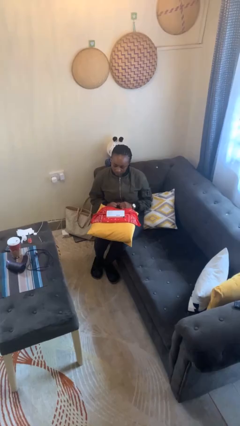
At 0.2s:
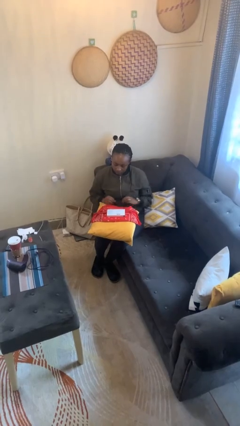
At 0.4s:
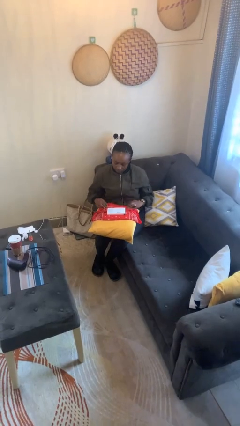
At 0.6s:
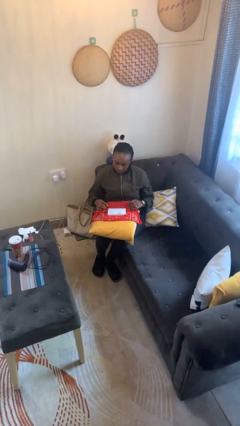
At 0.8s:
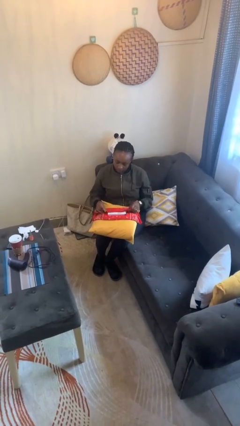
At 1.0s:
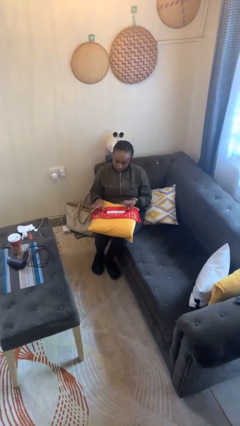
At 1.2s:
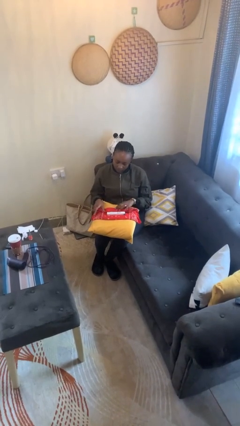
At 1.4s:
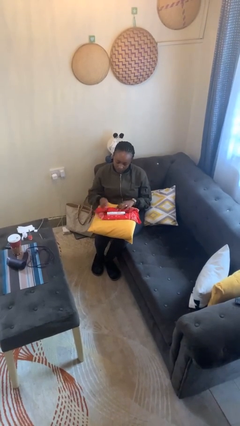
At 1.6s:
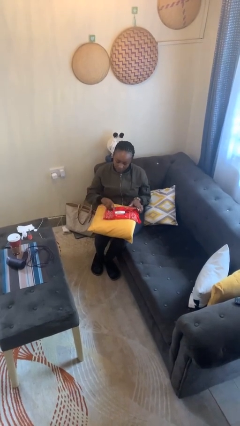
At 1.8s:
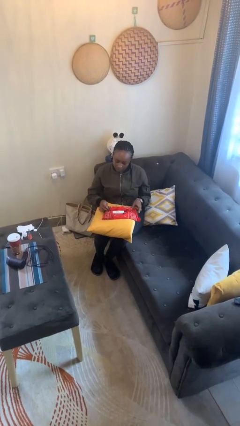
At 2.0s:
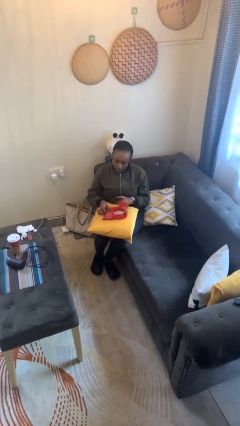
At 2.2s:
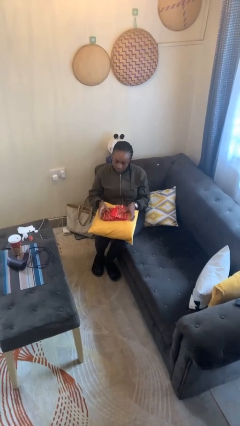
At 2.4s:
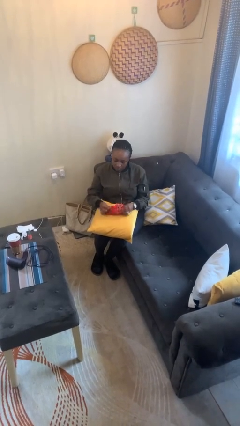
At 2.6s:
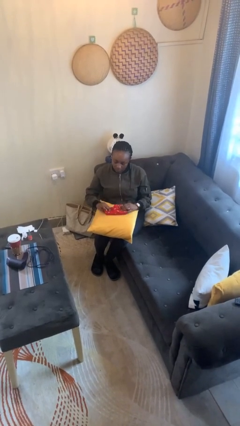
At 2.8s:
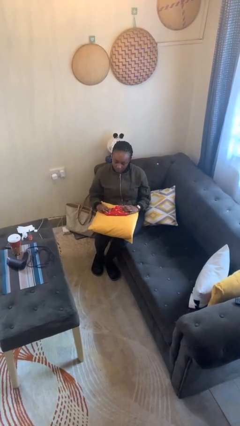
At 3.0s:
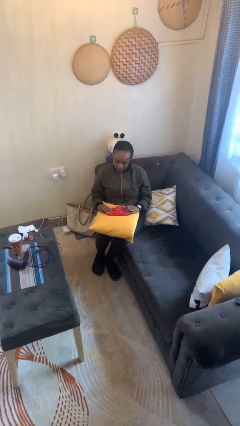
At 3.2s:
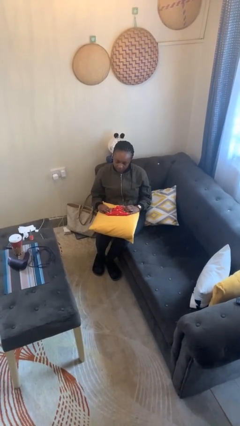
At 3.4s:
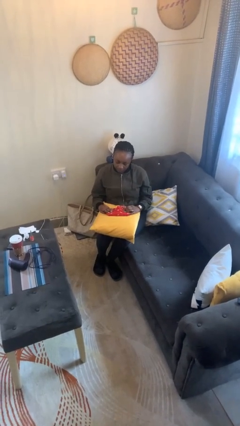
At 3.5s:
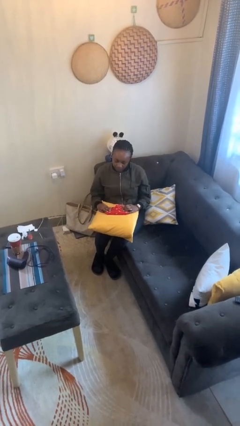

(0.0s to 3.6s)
person wraps box

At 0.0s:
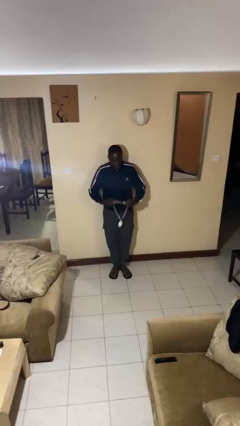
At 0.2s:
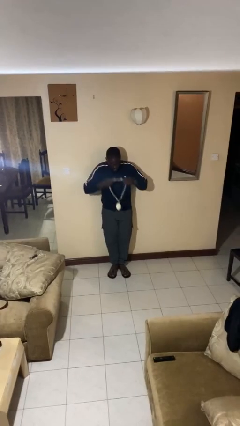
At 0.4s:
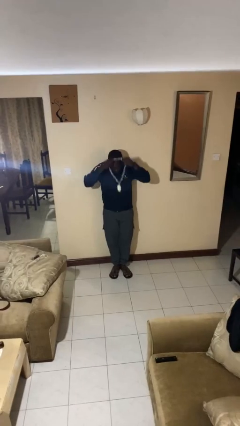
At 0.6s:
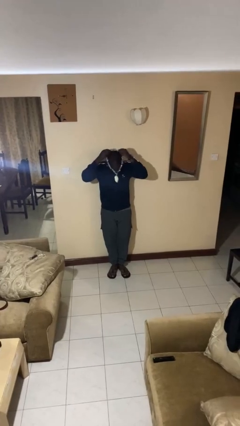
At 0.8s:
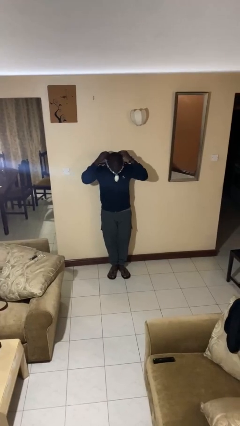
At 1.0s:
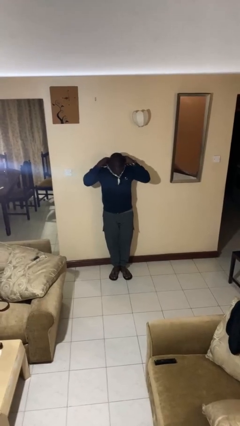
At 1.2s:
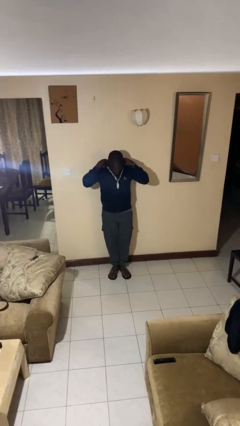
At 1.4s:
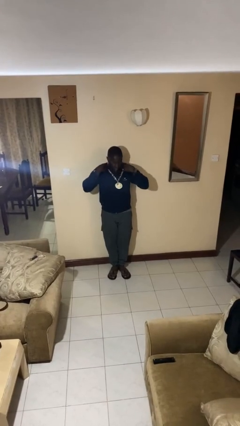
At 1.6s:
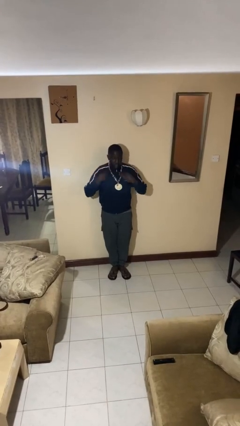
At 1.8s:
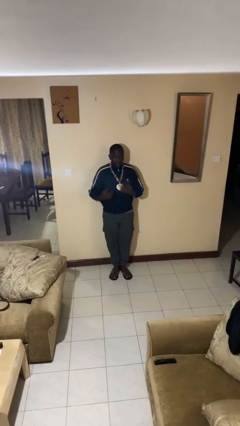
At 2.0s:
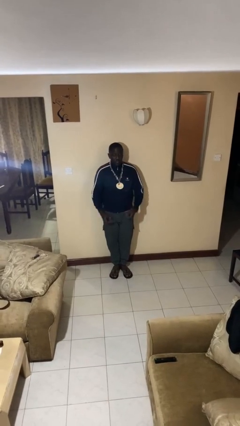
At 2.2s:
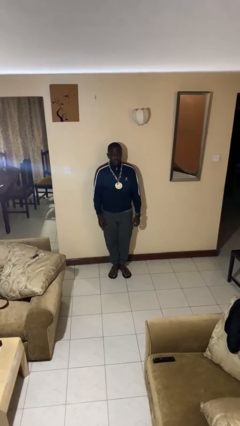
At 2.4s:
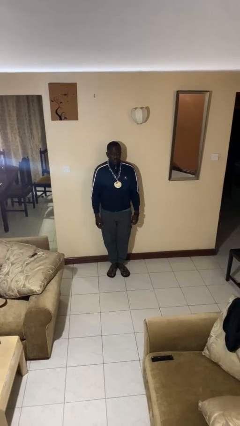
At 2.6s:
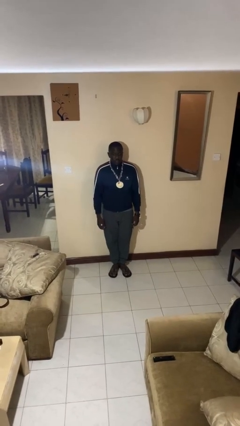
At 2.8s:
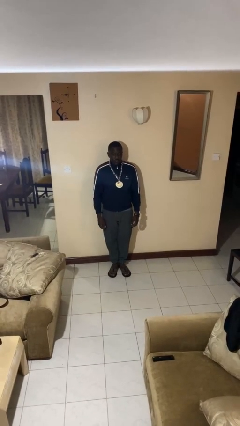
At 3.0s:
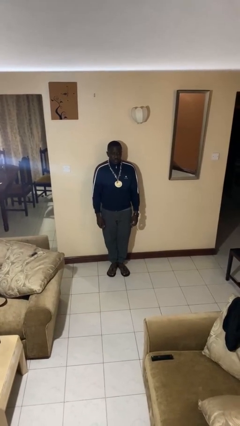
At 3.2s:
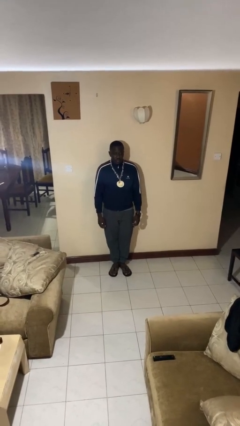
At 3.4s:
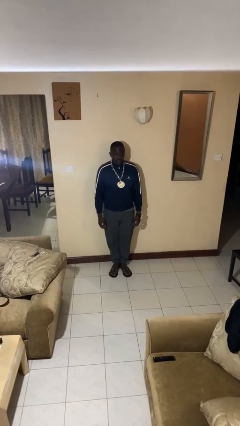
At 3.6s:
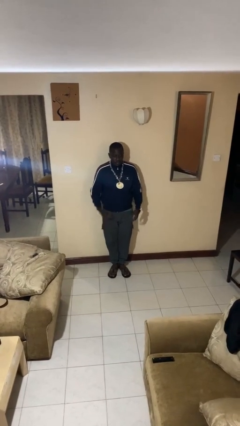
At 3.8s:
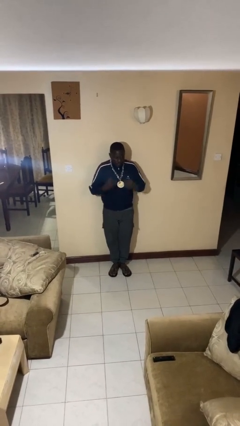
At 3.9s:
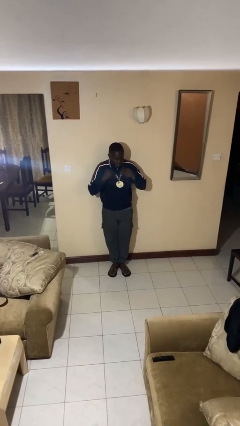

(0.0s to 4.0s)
person puts on necklace

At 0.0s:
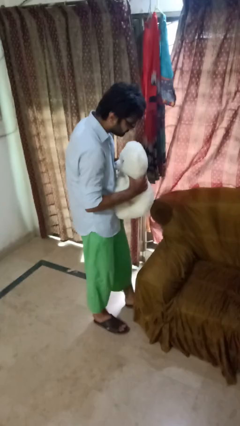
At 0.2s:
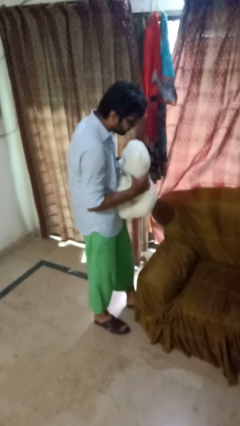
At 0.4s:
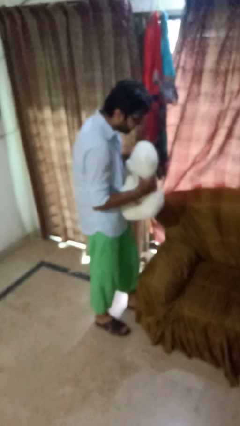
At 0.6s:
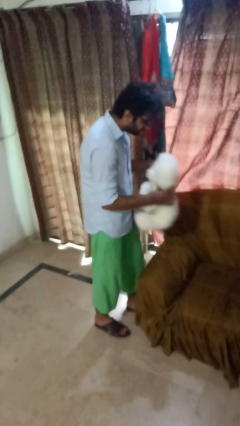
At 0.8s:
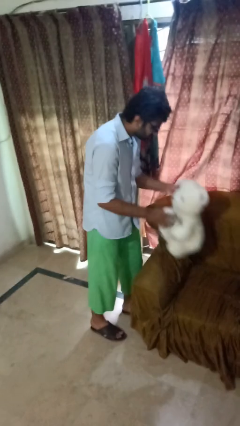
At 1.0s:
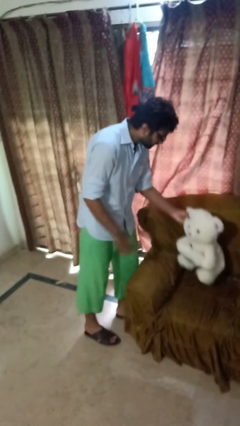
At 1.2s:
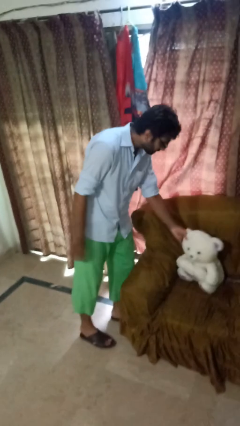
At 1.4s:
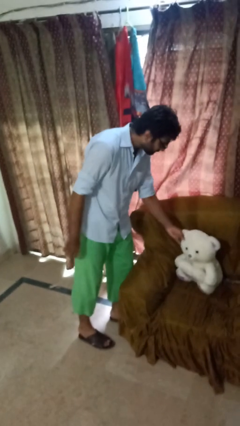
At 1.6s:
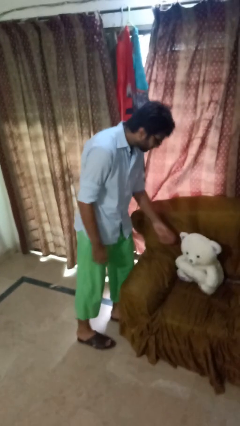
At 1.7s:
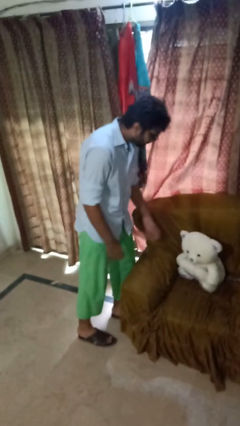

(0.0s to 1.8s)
person puts down object on couch

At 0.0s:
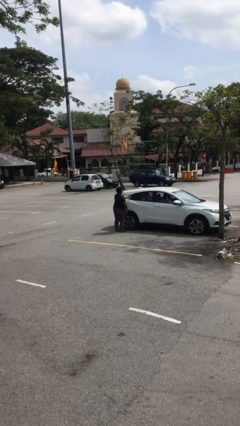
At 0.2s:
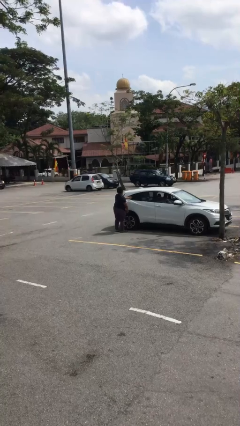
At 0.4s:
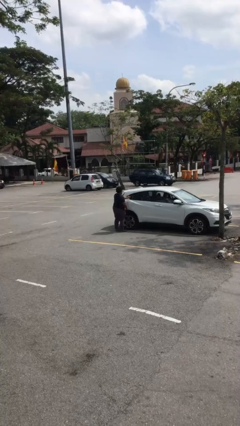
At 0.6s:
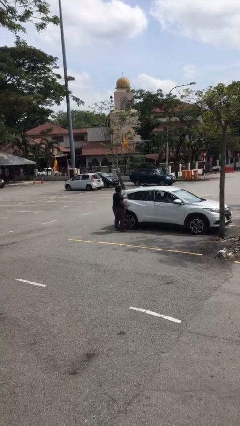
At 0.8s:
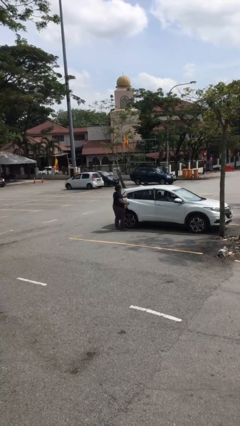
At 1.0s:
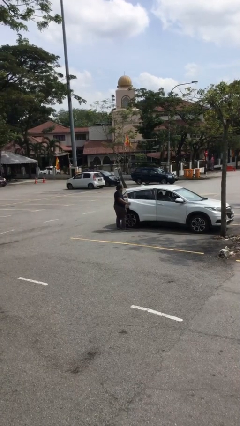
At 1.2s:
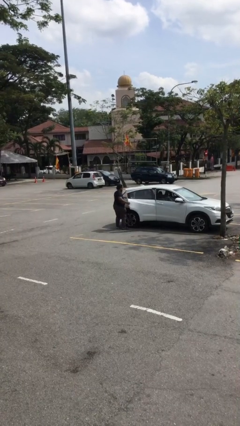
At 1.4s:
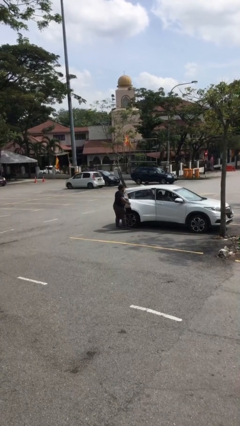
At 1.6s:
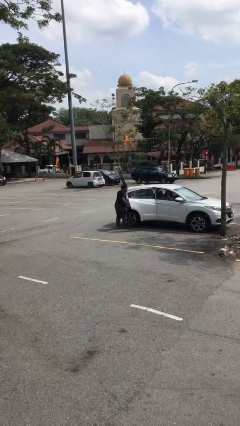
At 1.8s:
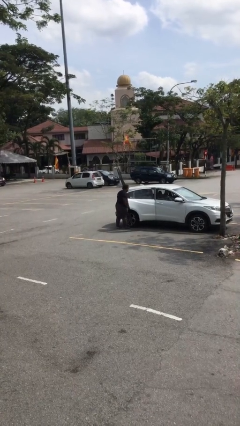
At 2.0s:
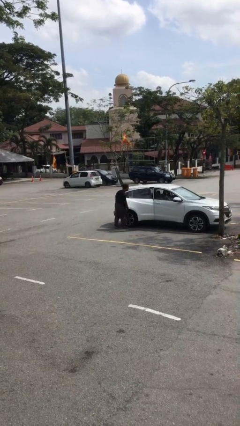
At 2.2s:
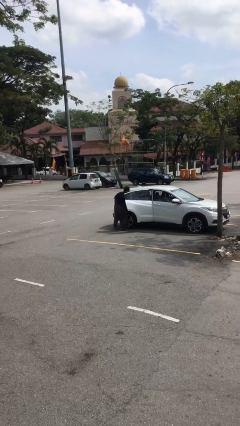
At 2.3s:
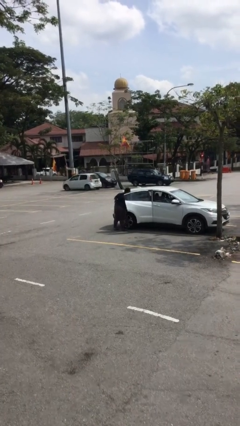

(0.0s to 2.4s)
person opens car door

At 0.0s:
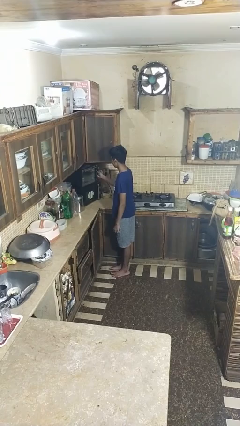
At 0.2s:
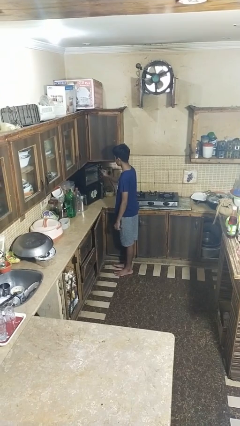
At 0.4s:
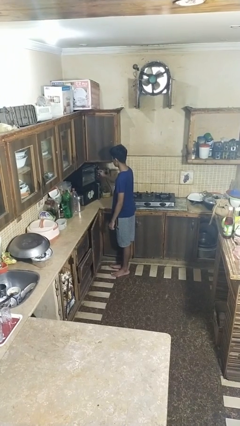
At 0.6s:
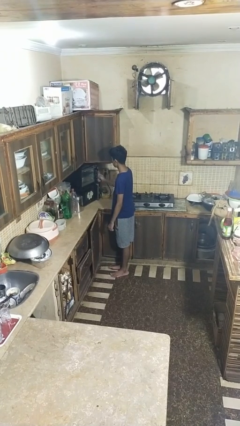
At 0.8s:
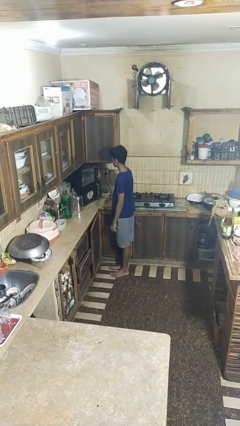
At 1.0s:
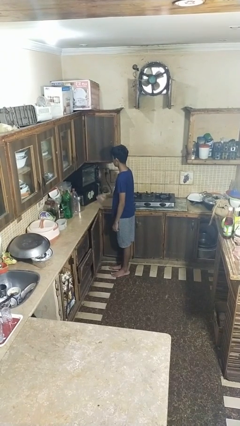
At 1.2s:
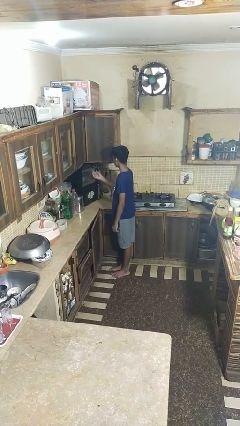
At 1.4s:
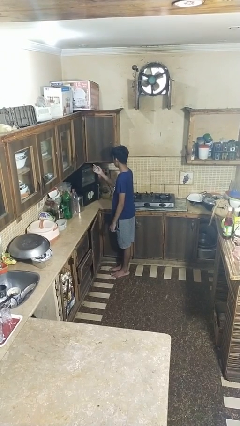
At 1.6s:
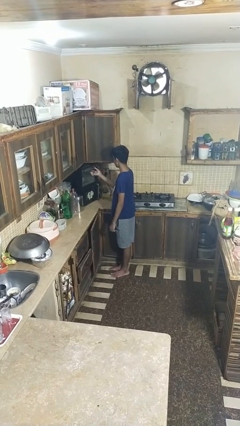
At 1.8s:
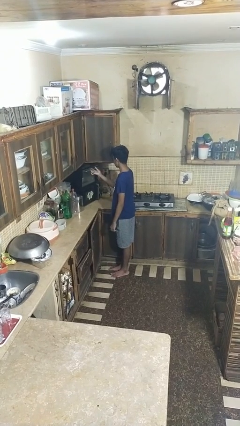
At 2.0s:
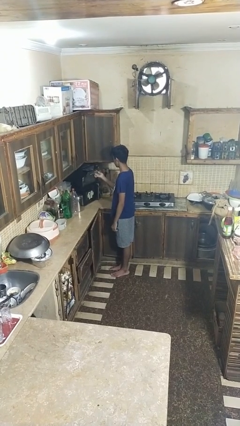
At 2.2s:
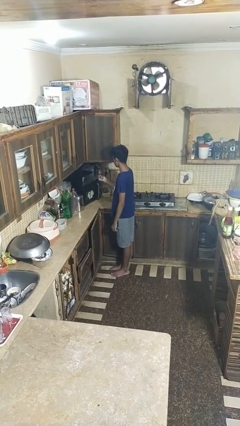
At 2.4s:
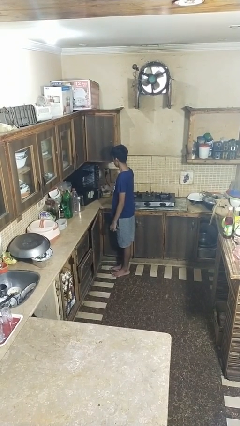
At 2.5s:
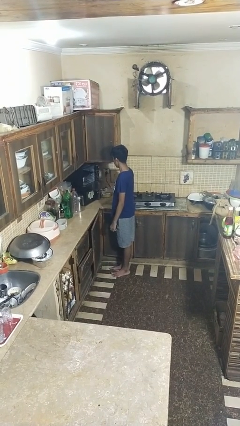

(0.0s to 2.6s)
person opens oven door

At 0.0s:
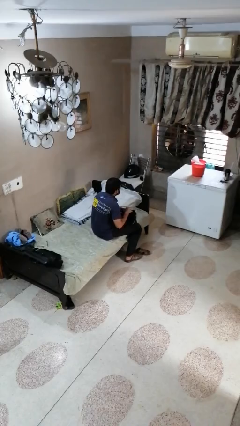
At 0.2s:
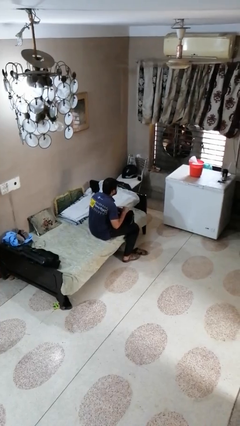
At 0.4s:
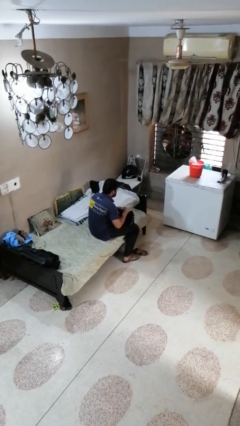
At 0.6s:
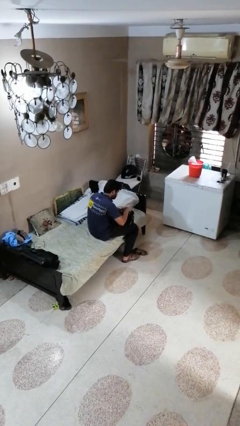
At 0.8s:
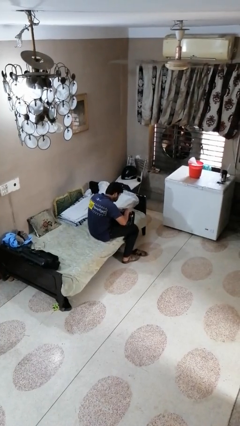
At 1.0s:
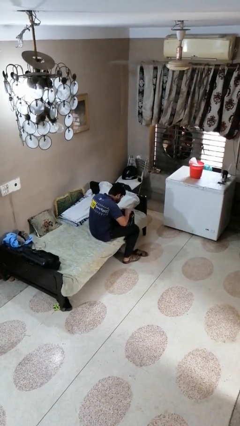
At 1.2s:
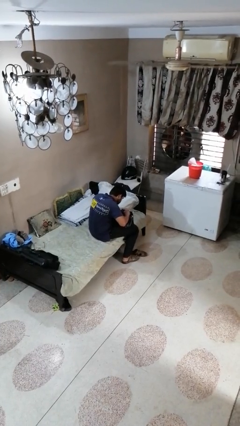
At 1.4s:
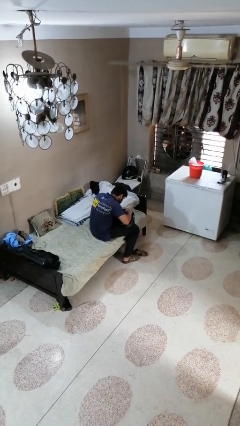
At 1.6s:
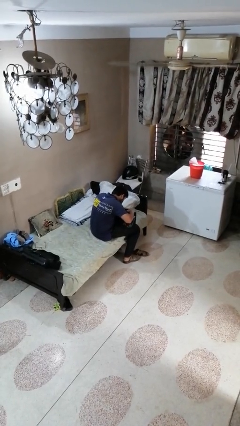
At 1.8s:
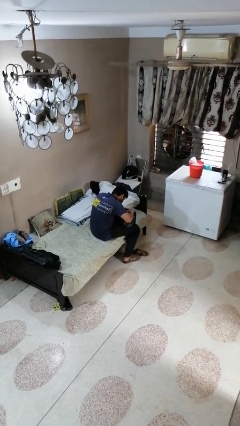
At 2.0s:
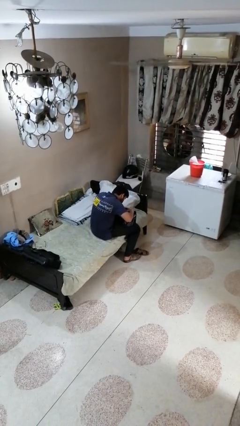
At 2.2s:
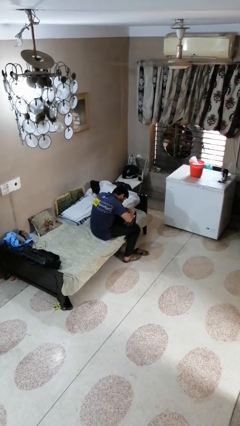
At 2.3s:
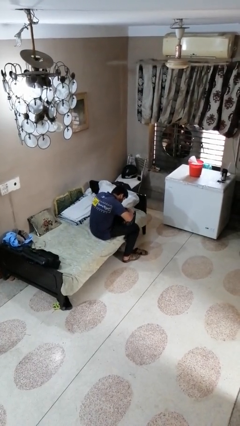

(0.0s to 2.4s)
person searches in purse

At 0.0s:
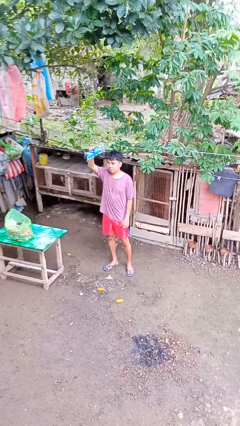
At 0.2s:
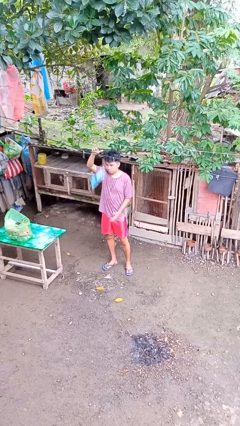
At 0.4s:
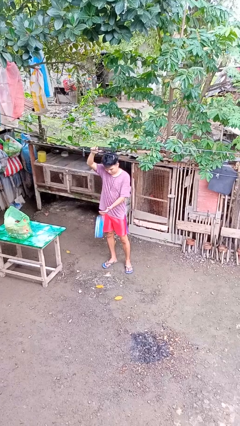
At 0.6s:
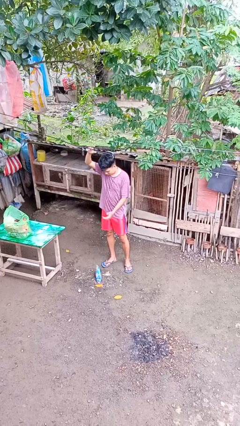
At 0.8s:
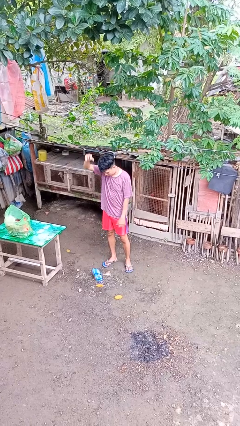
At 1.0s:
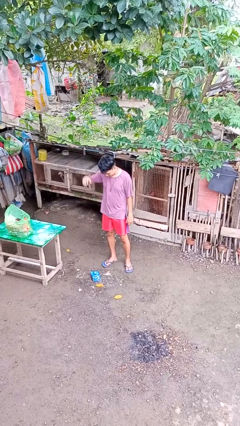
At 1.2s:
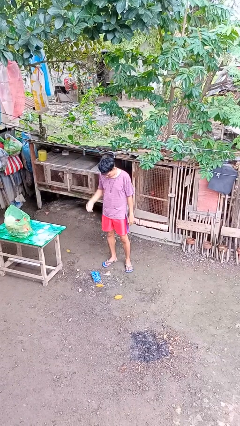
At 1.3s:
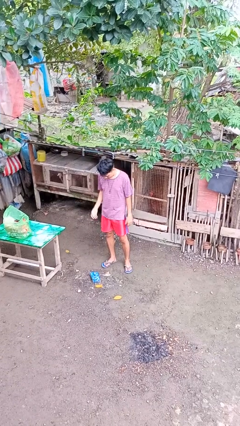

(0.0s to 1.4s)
person drops object
